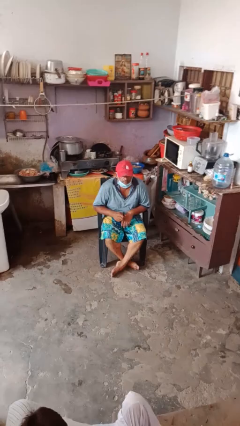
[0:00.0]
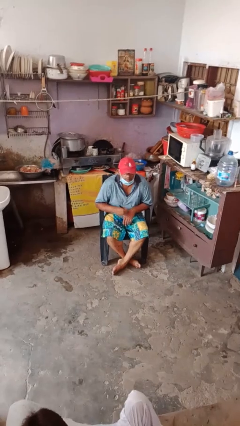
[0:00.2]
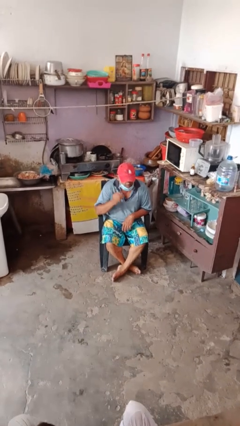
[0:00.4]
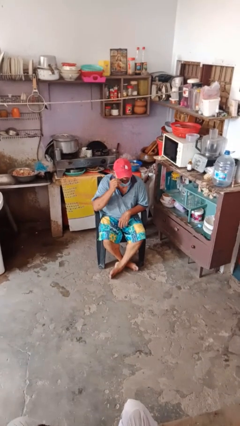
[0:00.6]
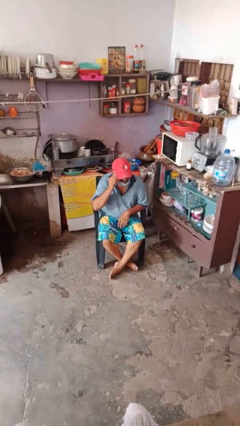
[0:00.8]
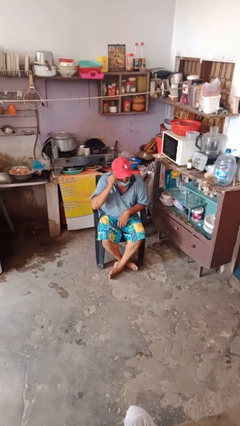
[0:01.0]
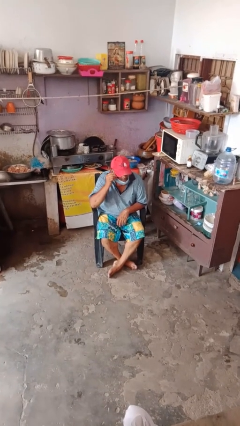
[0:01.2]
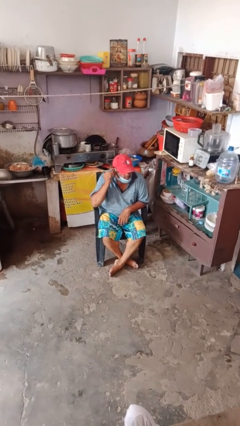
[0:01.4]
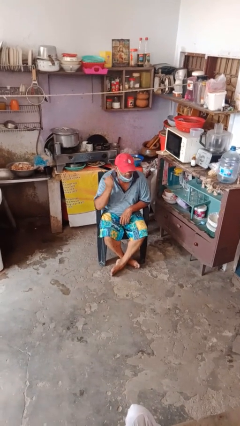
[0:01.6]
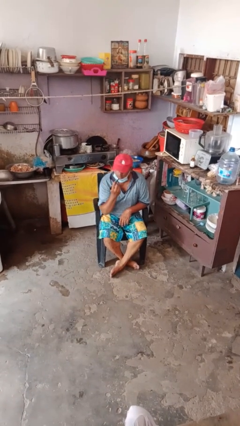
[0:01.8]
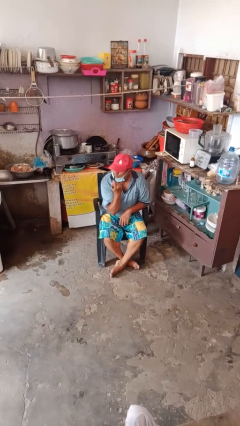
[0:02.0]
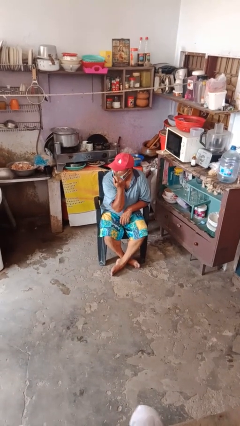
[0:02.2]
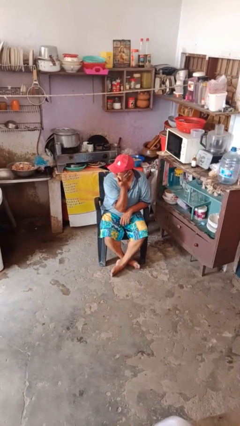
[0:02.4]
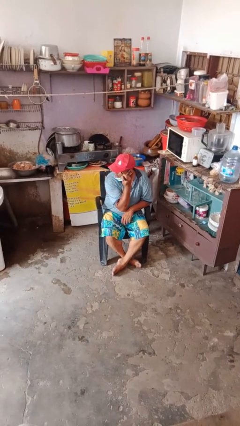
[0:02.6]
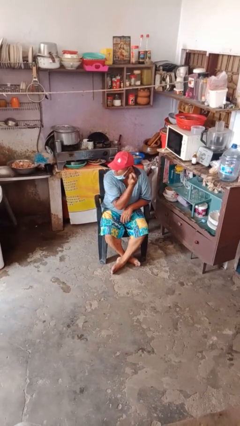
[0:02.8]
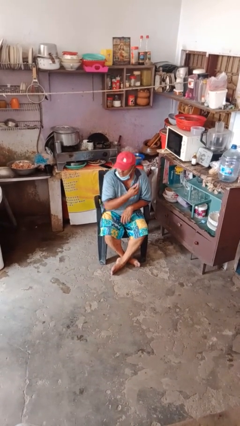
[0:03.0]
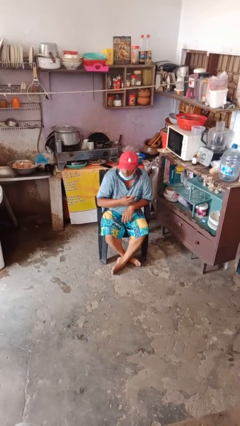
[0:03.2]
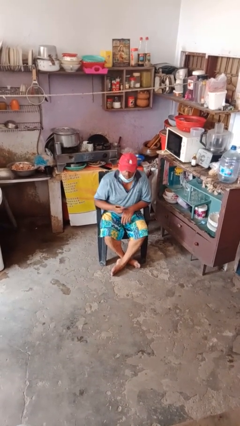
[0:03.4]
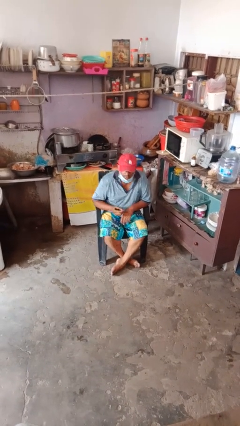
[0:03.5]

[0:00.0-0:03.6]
person applies eye makeup

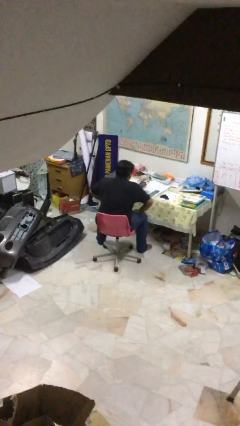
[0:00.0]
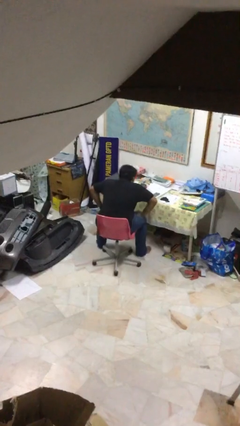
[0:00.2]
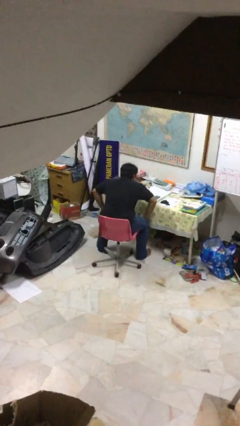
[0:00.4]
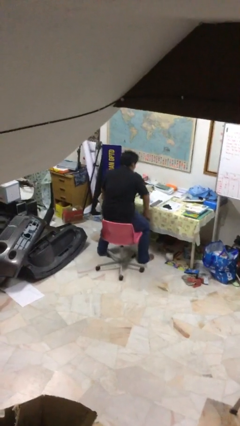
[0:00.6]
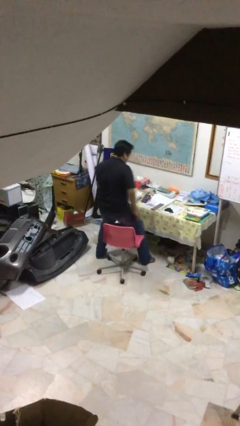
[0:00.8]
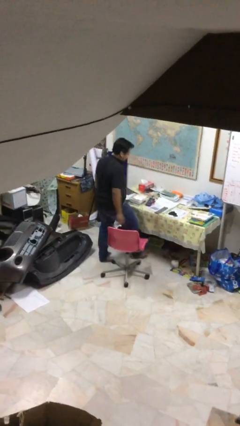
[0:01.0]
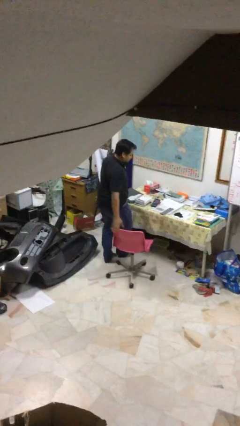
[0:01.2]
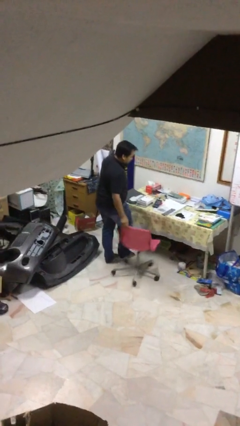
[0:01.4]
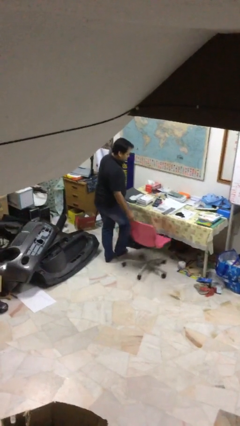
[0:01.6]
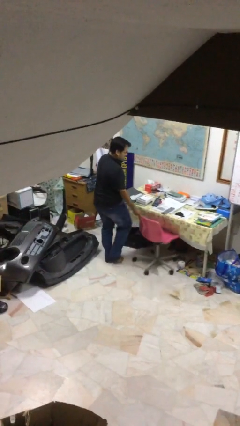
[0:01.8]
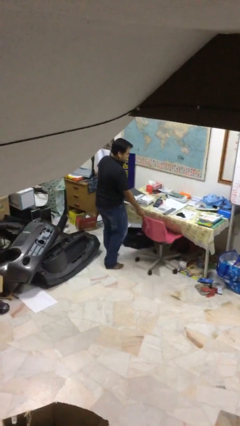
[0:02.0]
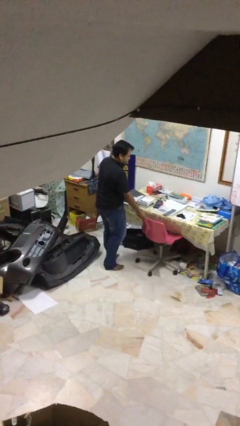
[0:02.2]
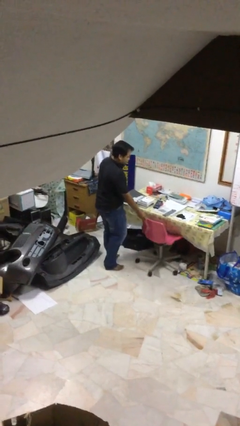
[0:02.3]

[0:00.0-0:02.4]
person stands up

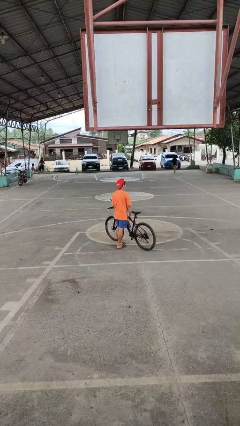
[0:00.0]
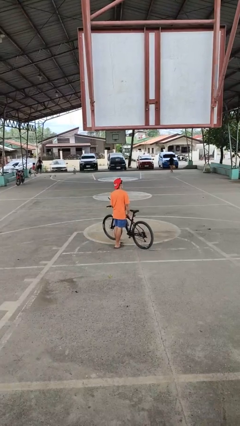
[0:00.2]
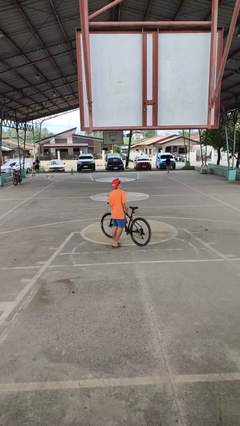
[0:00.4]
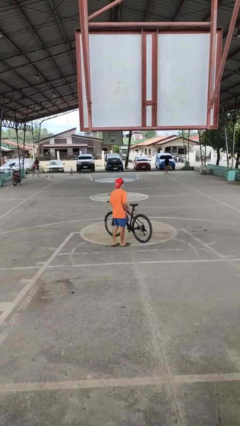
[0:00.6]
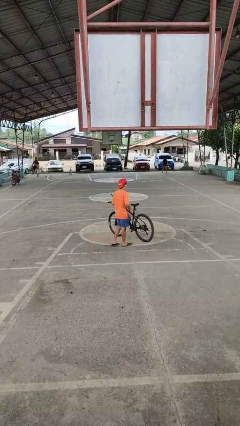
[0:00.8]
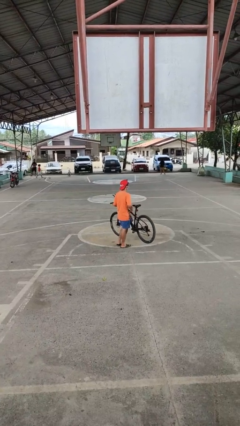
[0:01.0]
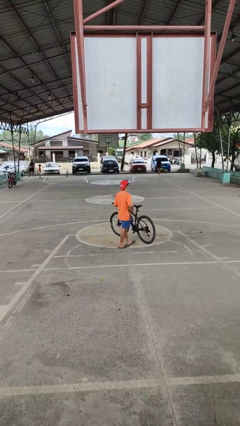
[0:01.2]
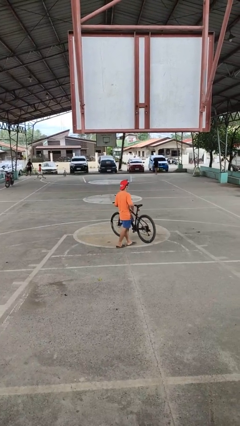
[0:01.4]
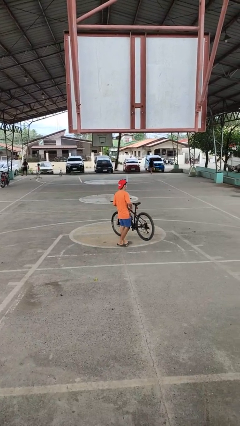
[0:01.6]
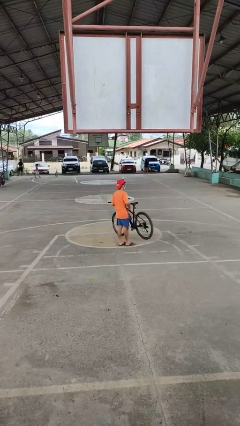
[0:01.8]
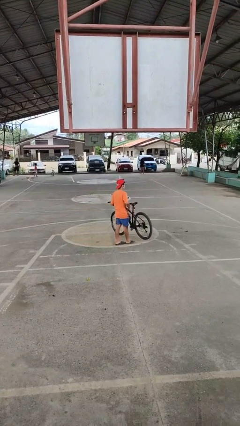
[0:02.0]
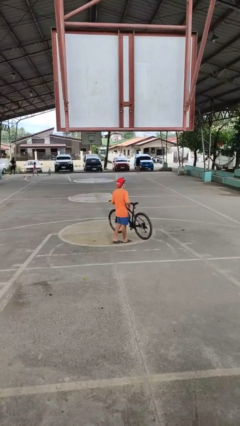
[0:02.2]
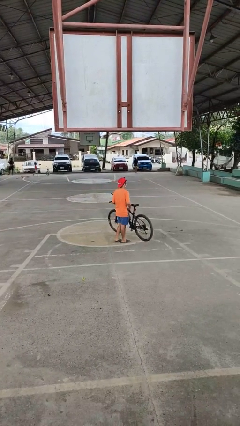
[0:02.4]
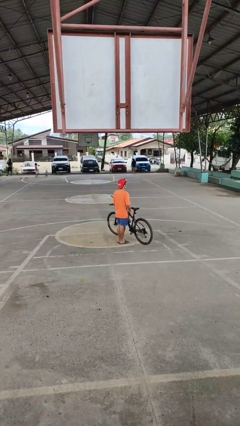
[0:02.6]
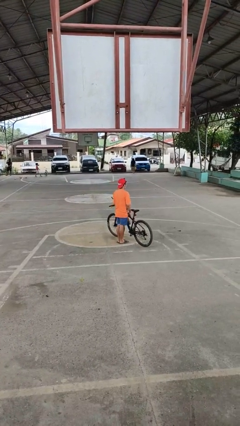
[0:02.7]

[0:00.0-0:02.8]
person carries bicycle

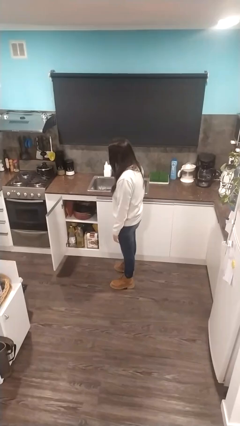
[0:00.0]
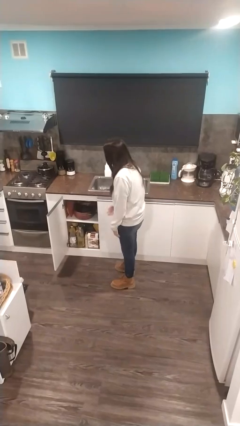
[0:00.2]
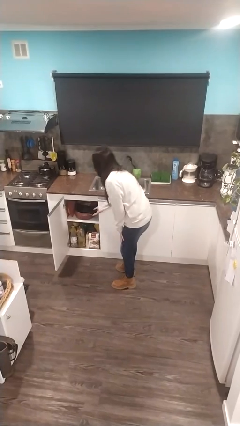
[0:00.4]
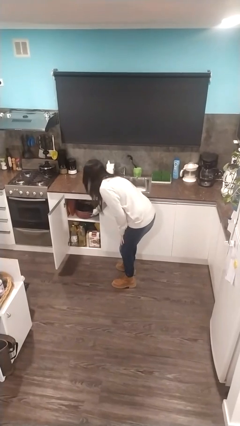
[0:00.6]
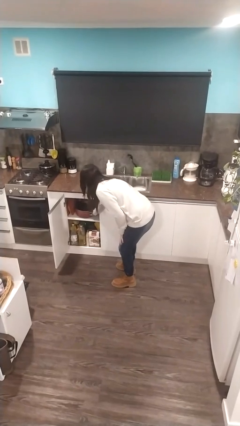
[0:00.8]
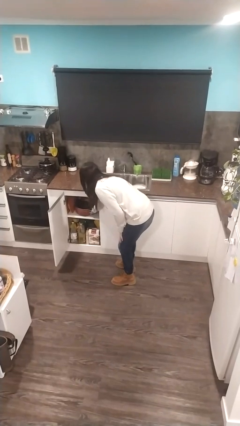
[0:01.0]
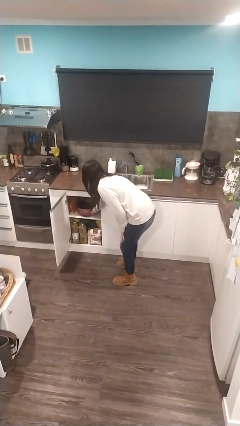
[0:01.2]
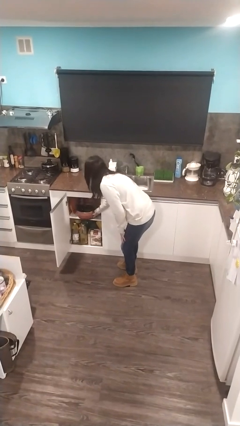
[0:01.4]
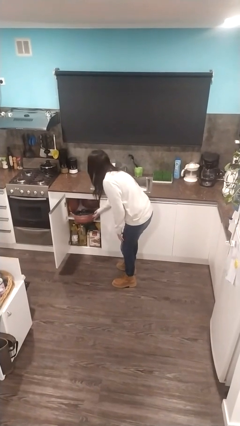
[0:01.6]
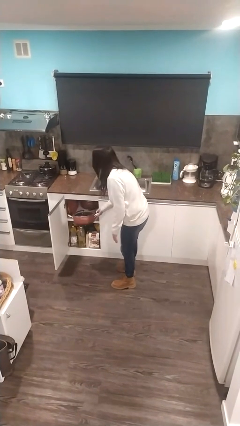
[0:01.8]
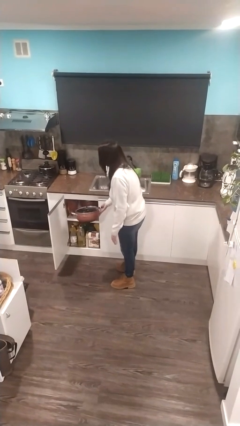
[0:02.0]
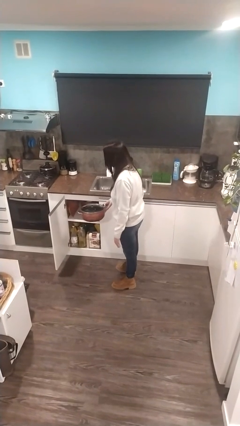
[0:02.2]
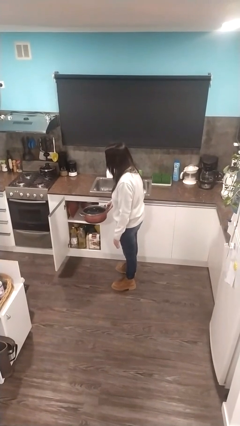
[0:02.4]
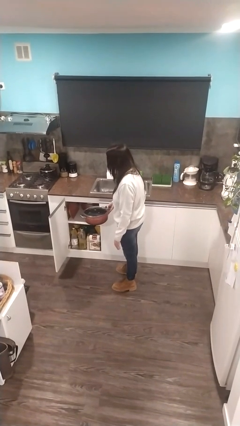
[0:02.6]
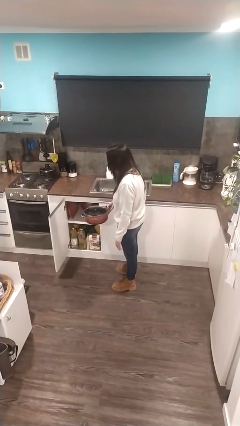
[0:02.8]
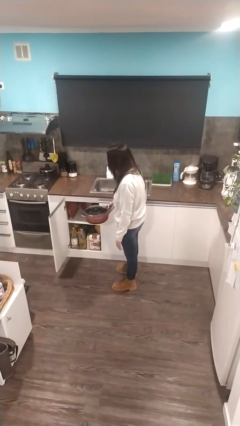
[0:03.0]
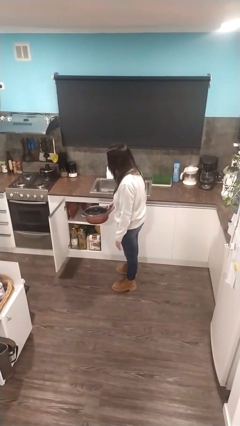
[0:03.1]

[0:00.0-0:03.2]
person picks up object from cabinet

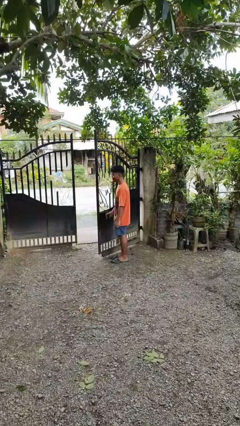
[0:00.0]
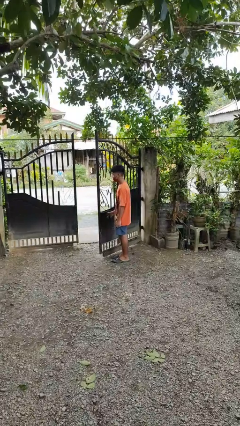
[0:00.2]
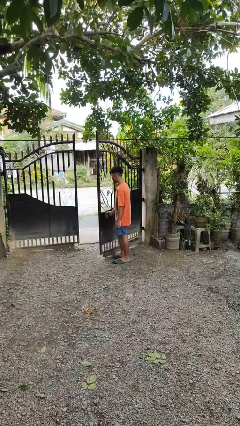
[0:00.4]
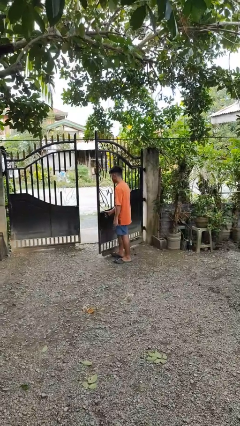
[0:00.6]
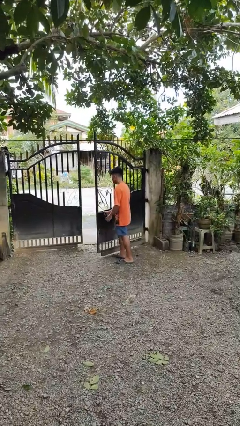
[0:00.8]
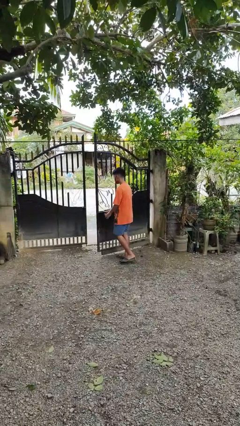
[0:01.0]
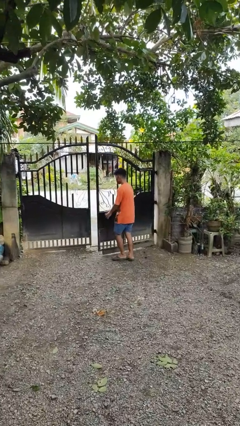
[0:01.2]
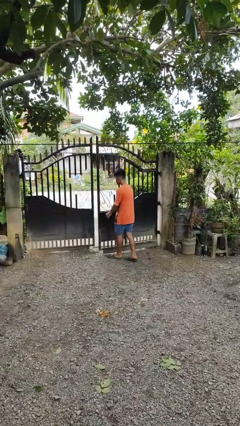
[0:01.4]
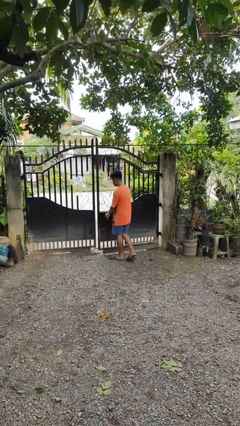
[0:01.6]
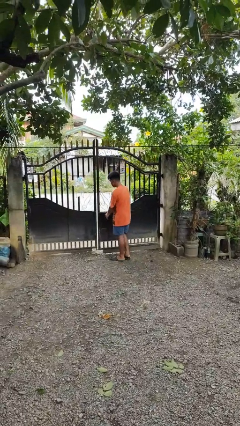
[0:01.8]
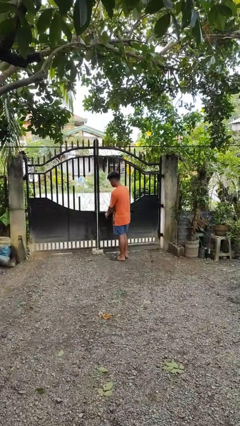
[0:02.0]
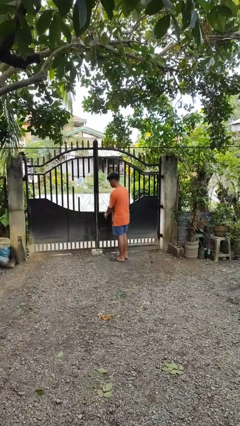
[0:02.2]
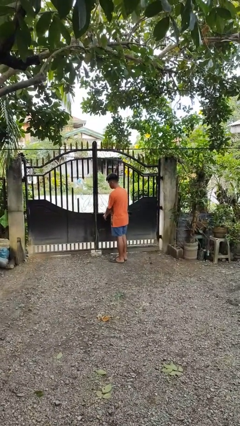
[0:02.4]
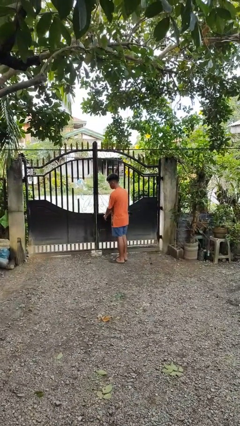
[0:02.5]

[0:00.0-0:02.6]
person closes gate

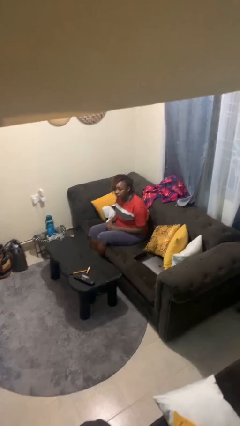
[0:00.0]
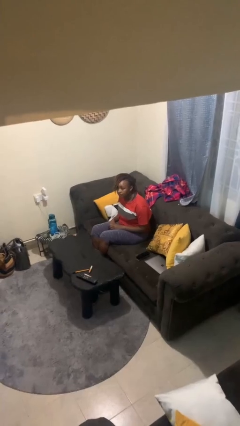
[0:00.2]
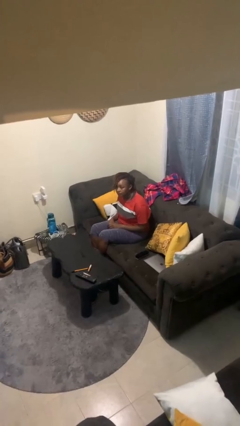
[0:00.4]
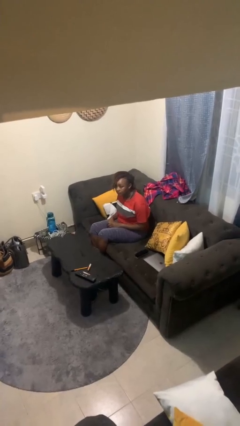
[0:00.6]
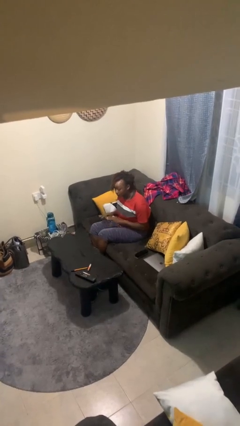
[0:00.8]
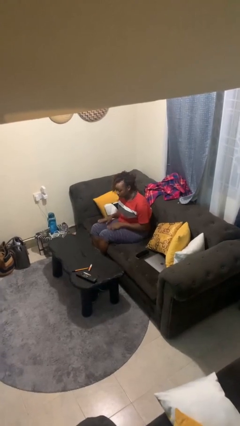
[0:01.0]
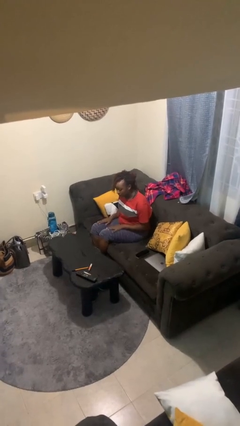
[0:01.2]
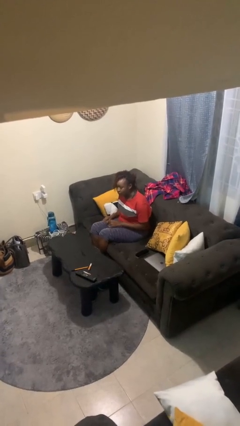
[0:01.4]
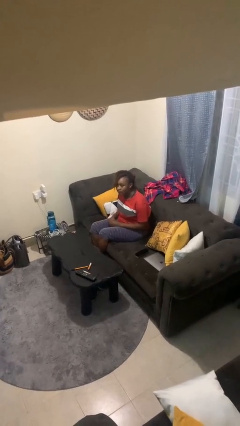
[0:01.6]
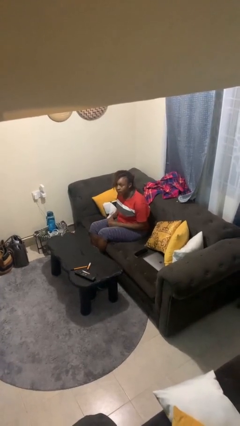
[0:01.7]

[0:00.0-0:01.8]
person slaps hands on thighs

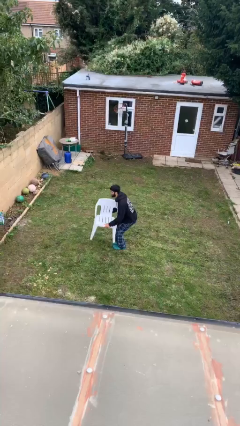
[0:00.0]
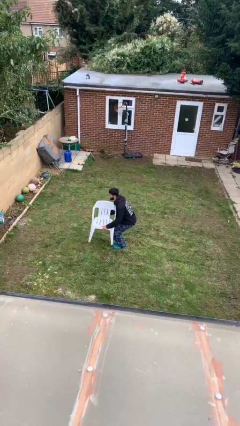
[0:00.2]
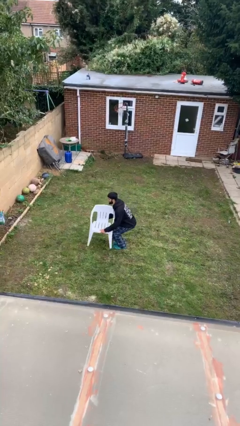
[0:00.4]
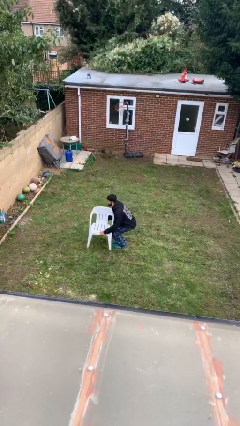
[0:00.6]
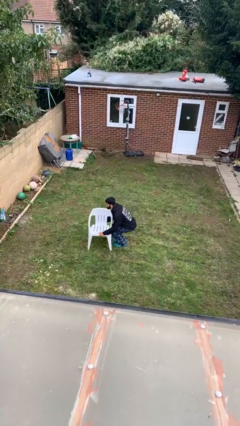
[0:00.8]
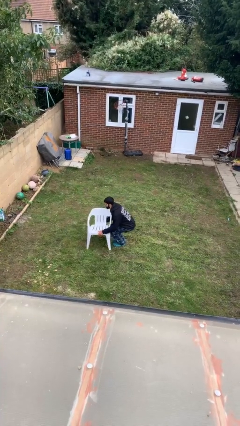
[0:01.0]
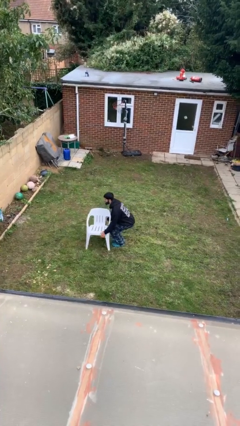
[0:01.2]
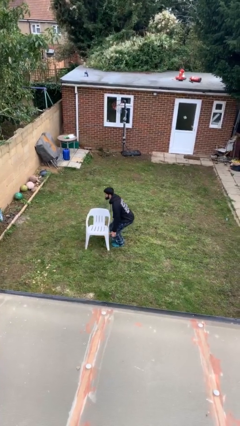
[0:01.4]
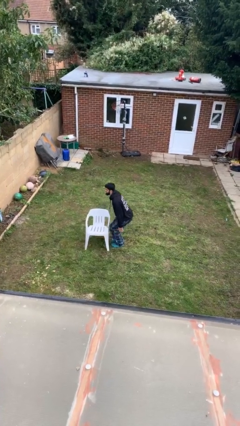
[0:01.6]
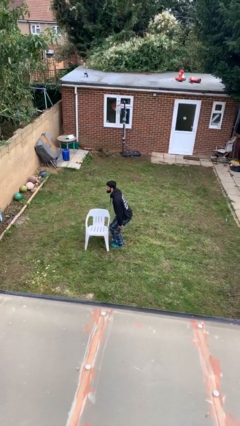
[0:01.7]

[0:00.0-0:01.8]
person puts down object on floor
